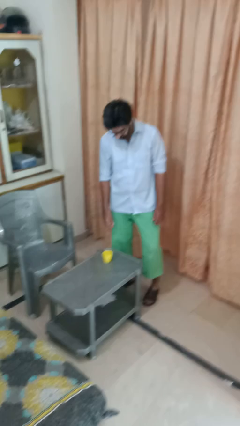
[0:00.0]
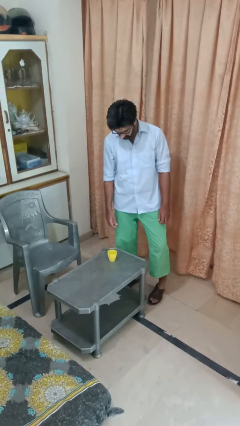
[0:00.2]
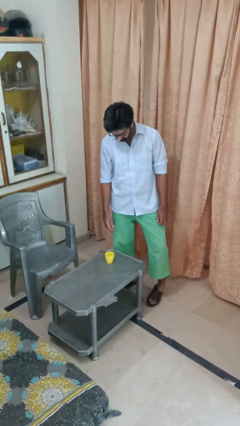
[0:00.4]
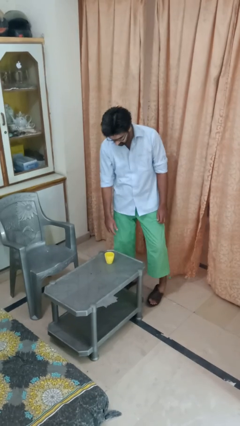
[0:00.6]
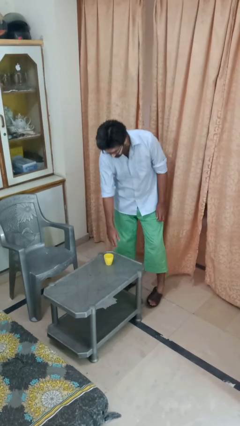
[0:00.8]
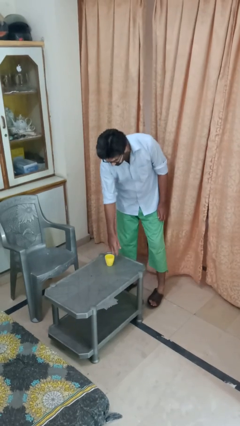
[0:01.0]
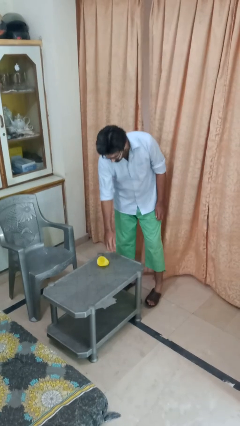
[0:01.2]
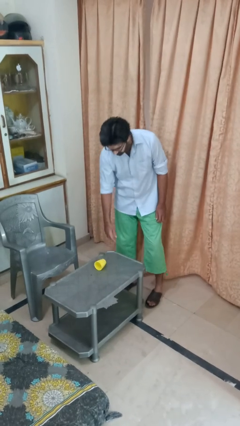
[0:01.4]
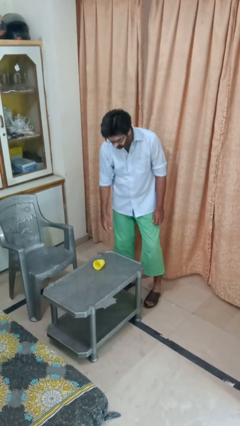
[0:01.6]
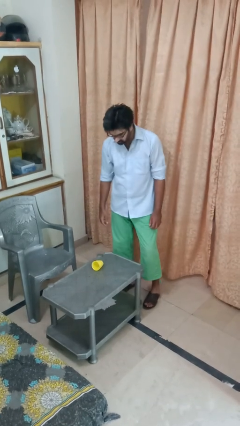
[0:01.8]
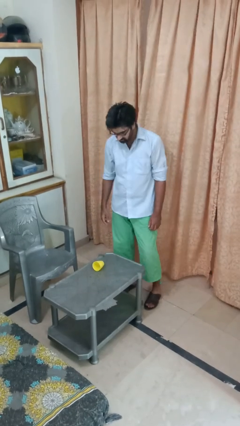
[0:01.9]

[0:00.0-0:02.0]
person knocks over glass

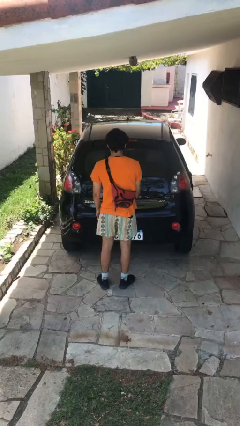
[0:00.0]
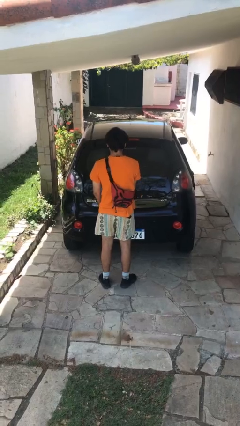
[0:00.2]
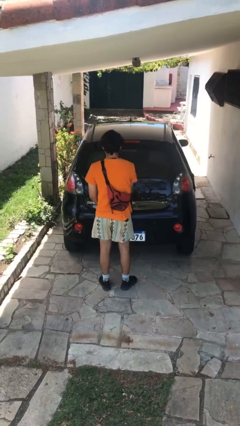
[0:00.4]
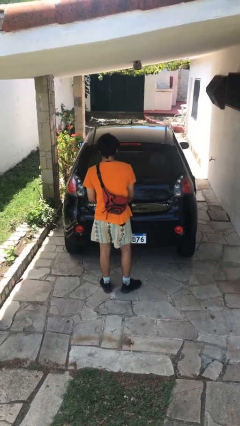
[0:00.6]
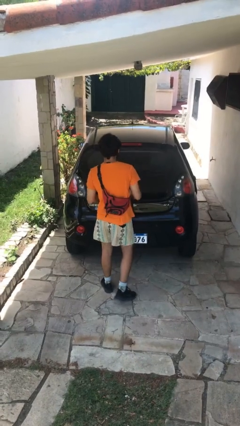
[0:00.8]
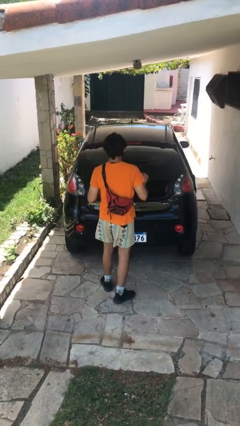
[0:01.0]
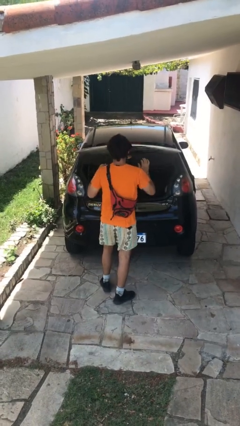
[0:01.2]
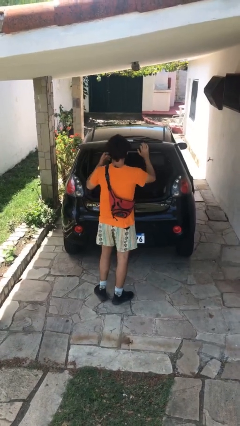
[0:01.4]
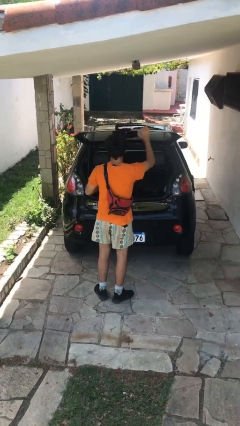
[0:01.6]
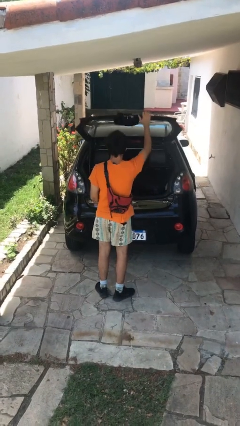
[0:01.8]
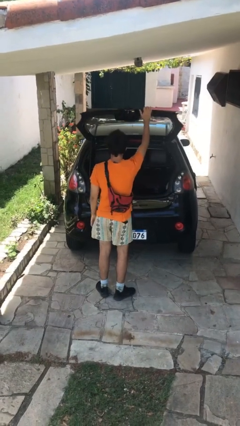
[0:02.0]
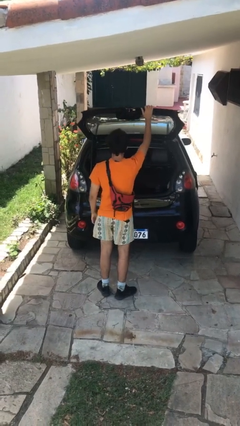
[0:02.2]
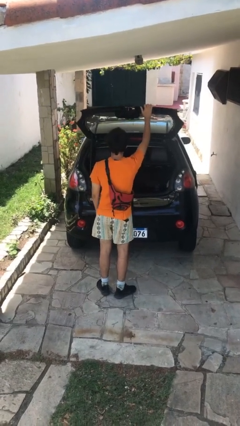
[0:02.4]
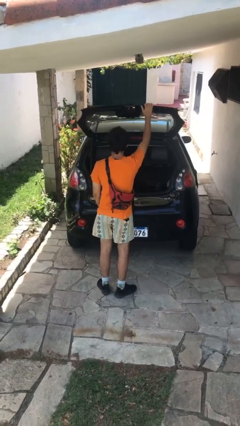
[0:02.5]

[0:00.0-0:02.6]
person opens car trunk

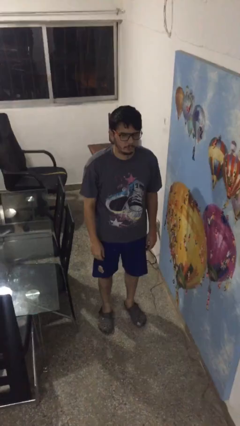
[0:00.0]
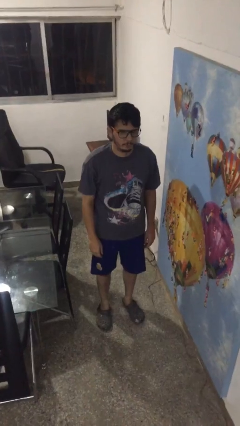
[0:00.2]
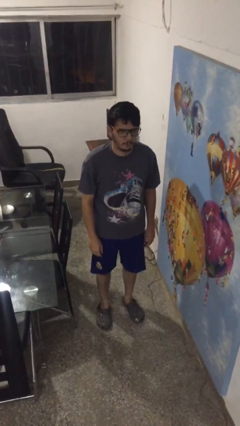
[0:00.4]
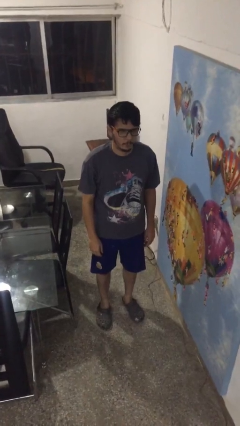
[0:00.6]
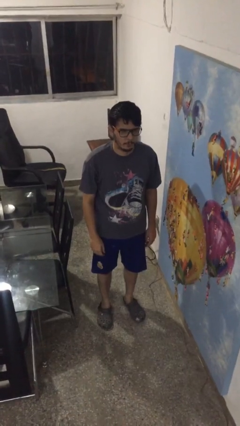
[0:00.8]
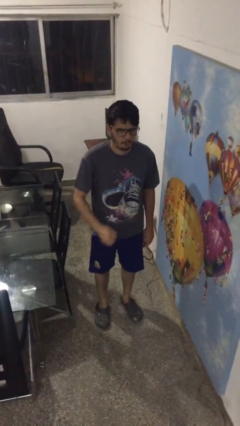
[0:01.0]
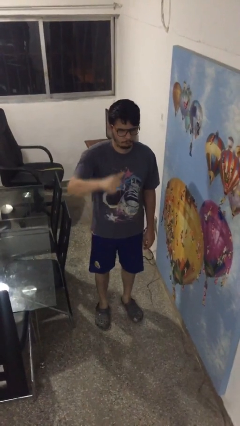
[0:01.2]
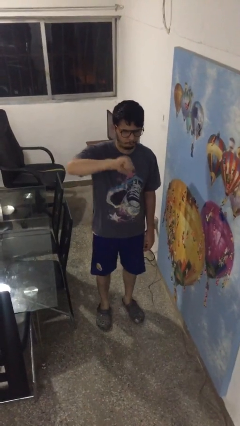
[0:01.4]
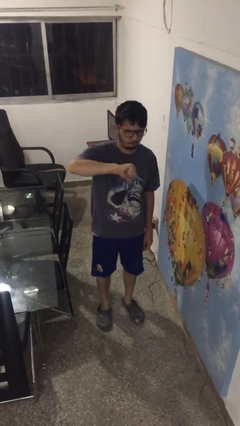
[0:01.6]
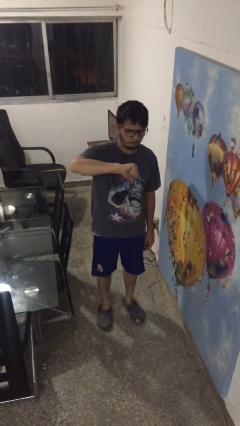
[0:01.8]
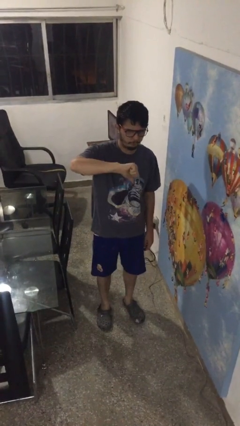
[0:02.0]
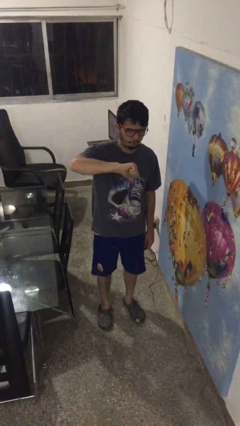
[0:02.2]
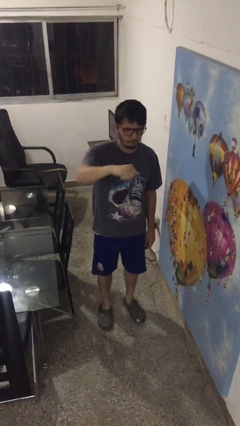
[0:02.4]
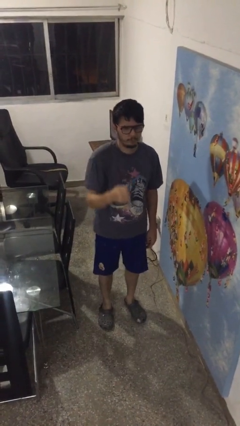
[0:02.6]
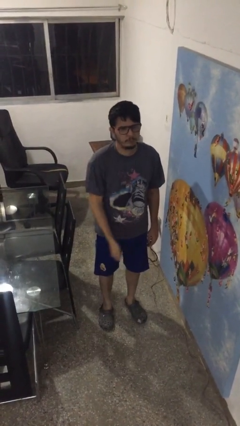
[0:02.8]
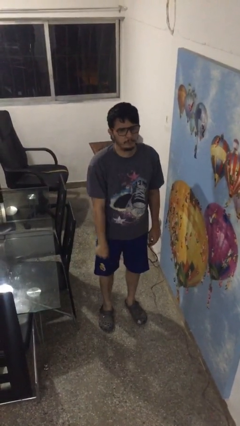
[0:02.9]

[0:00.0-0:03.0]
person gestures thumbs down

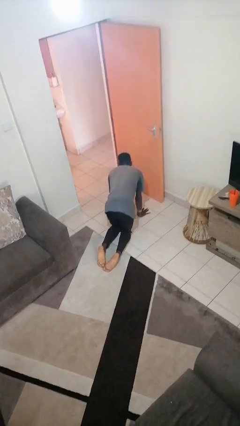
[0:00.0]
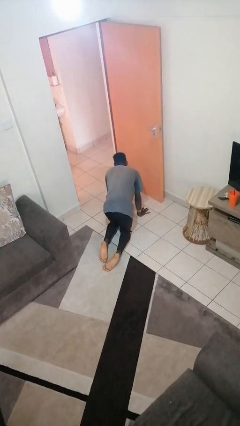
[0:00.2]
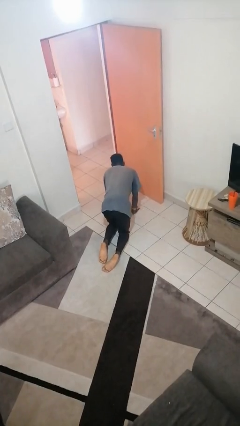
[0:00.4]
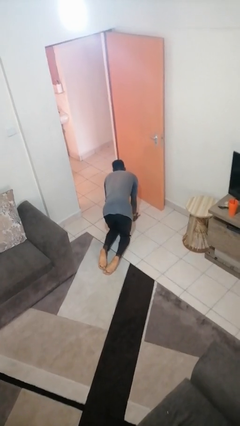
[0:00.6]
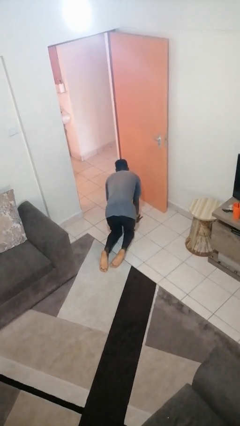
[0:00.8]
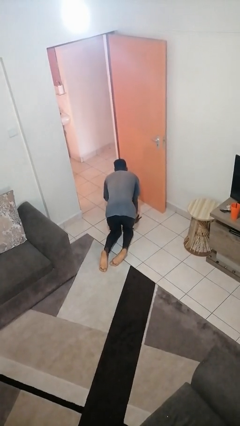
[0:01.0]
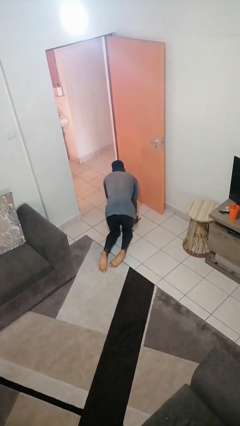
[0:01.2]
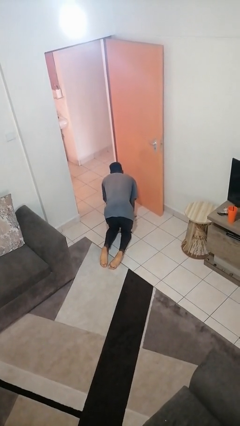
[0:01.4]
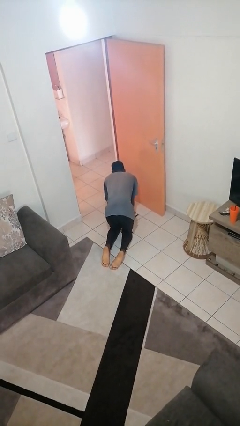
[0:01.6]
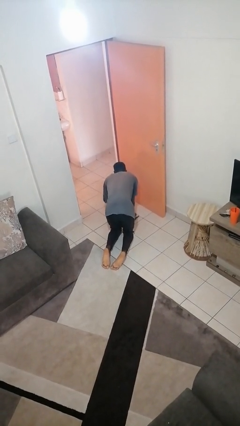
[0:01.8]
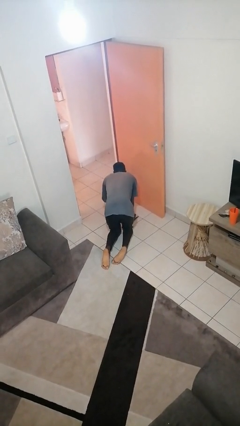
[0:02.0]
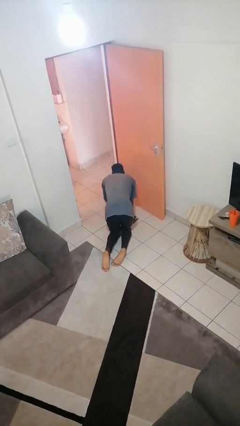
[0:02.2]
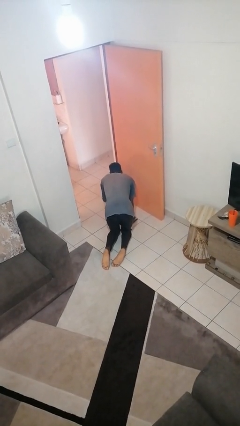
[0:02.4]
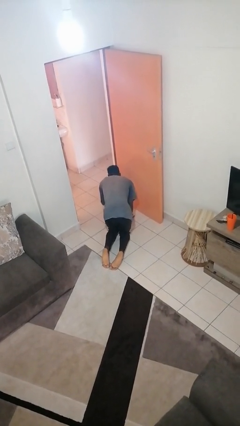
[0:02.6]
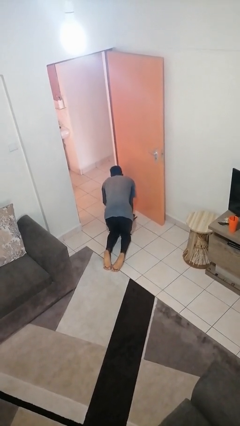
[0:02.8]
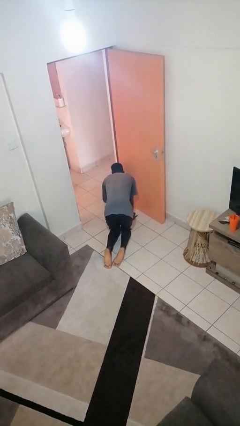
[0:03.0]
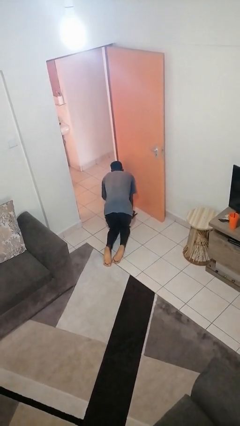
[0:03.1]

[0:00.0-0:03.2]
person crawls

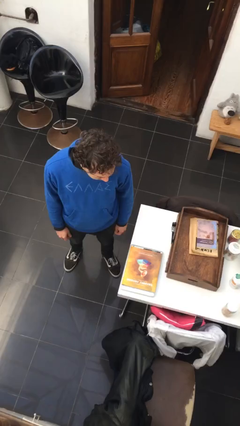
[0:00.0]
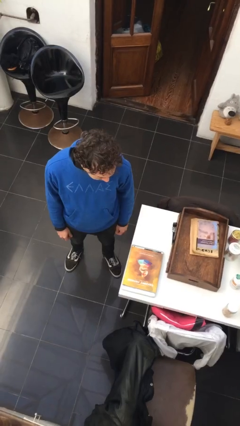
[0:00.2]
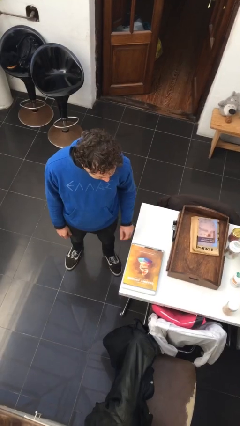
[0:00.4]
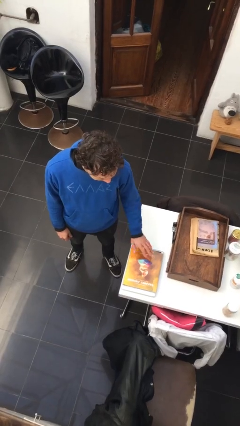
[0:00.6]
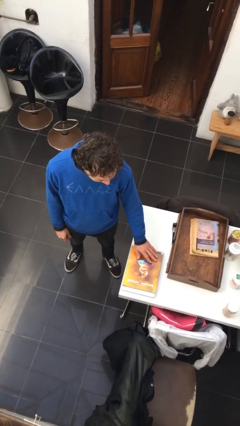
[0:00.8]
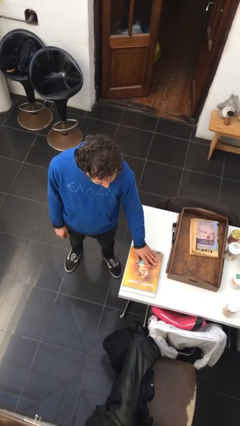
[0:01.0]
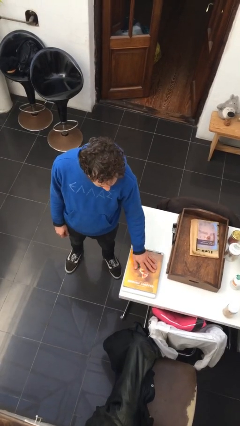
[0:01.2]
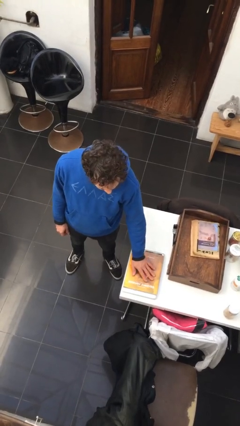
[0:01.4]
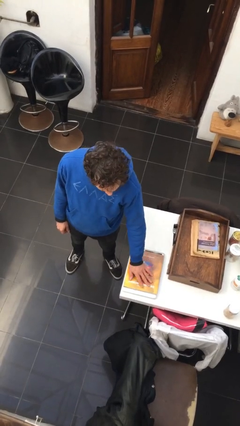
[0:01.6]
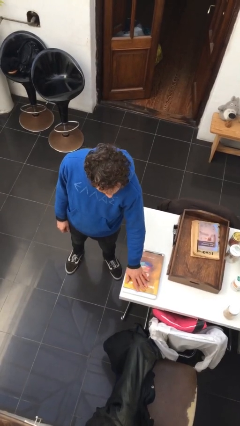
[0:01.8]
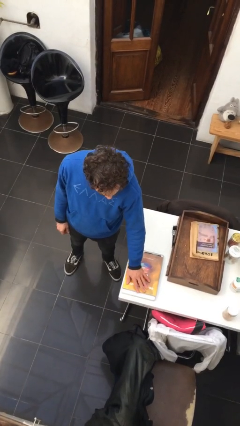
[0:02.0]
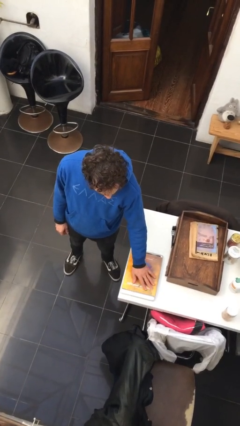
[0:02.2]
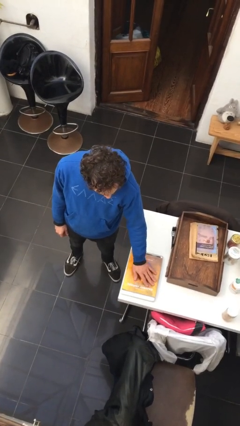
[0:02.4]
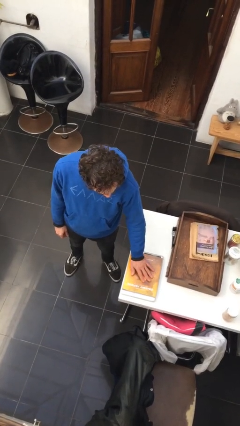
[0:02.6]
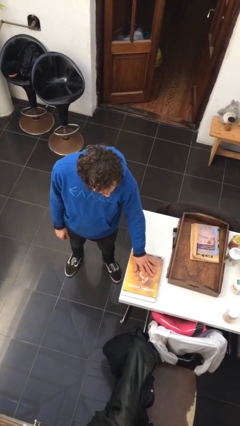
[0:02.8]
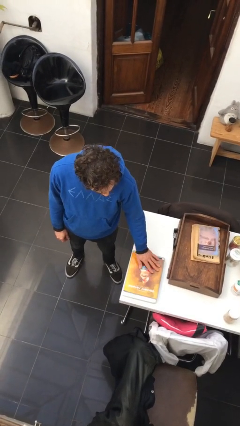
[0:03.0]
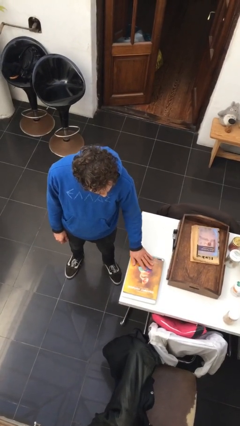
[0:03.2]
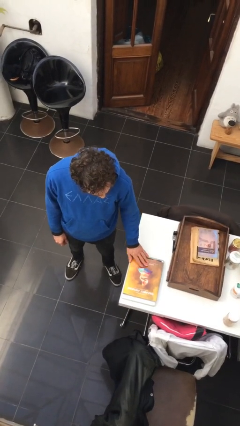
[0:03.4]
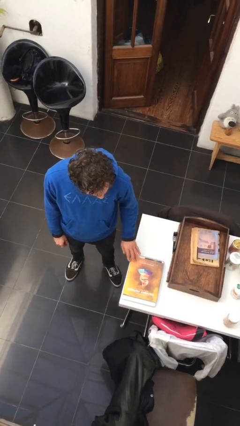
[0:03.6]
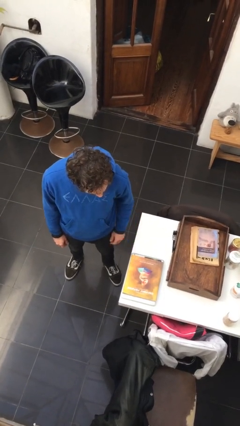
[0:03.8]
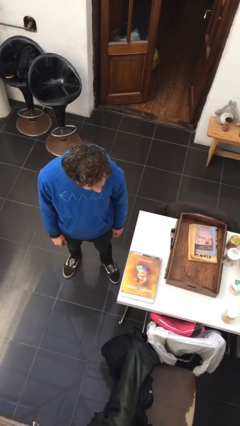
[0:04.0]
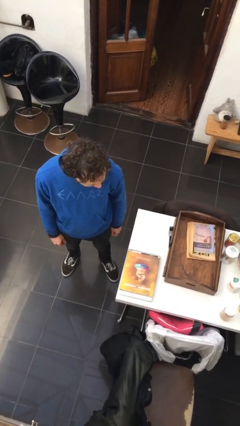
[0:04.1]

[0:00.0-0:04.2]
person waves hand over object

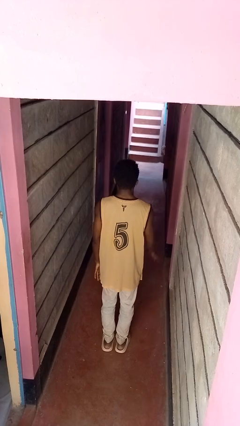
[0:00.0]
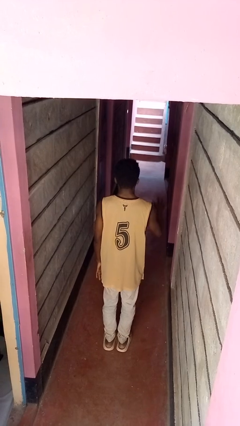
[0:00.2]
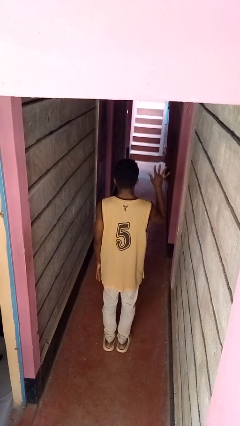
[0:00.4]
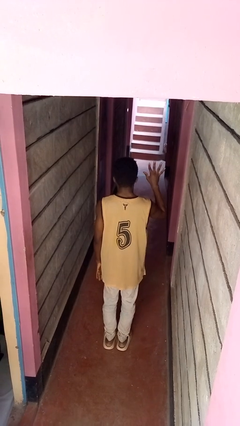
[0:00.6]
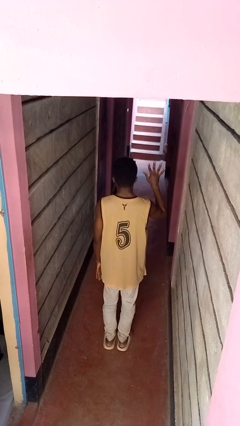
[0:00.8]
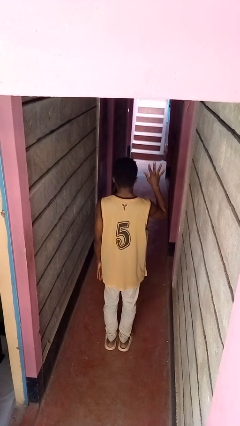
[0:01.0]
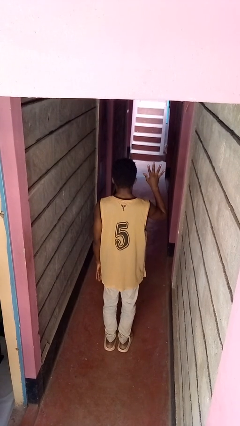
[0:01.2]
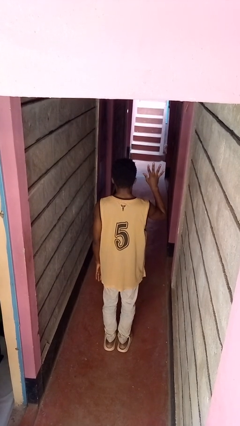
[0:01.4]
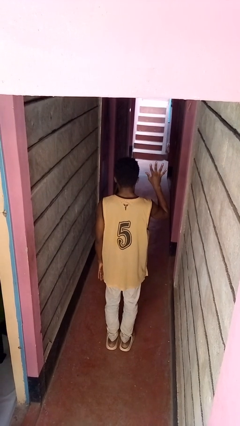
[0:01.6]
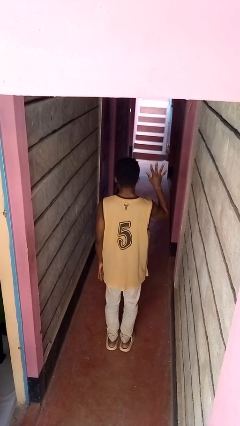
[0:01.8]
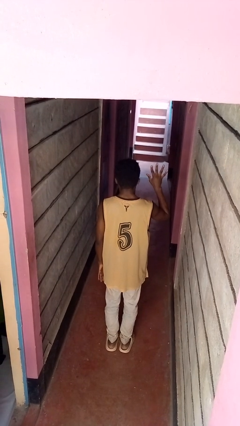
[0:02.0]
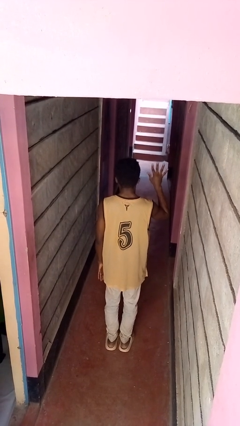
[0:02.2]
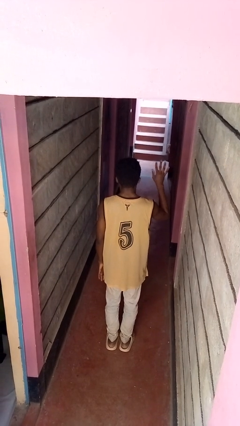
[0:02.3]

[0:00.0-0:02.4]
person gestures number five

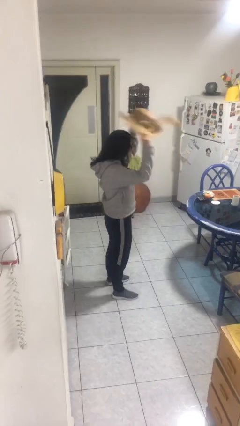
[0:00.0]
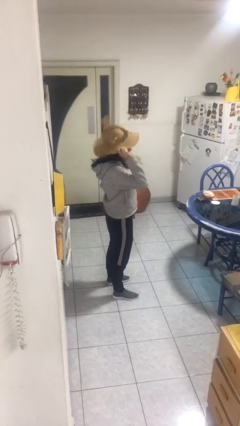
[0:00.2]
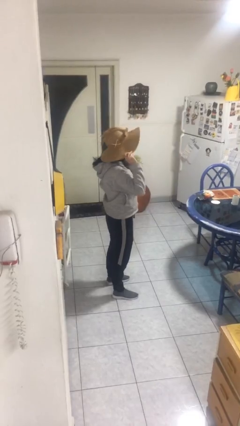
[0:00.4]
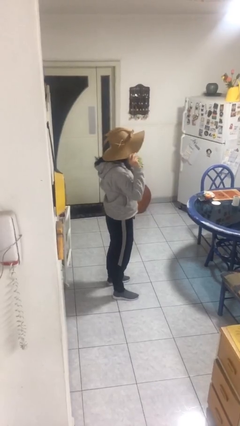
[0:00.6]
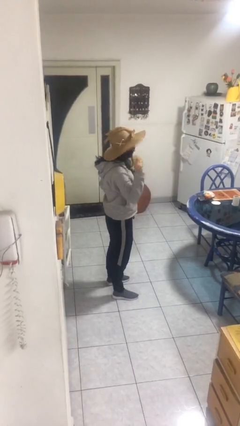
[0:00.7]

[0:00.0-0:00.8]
person puts on hat
